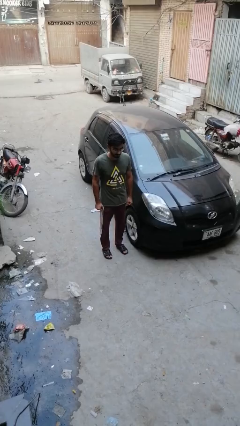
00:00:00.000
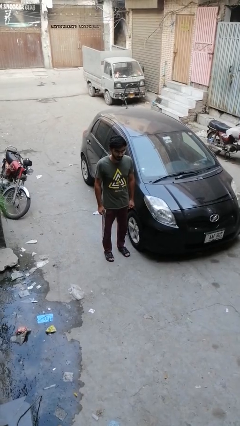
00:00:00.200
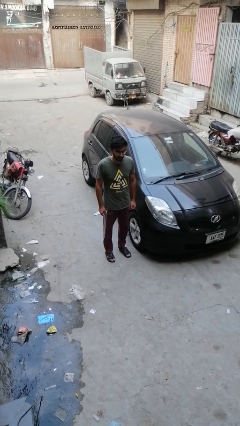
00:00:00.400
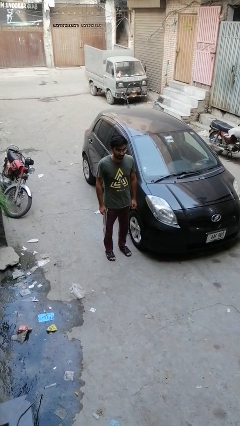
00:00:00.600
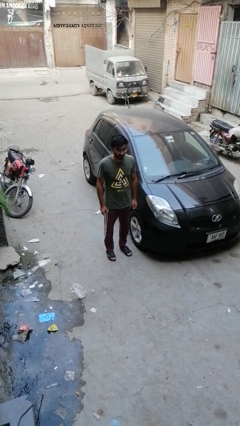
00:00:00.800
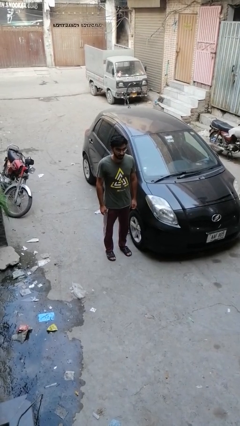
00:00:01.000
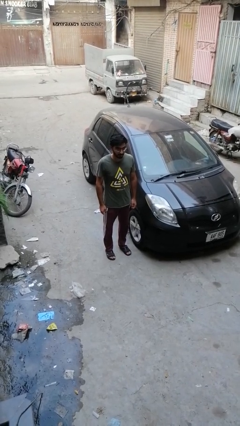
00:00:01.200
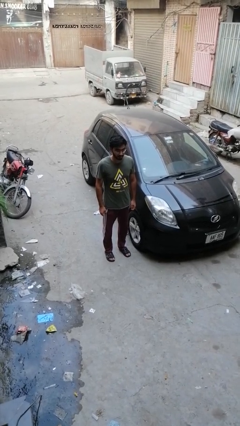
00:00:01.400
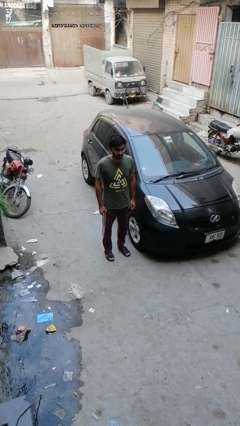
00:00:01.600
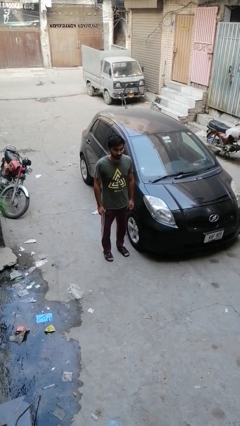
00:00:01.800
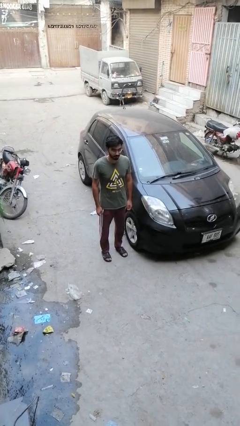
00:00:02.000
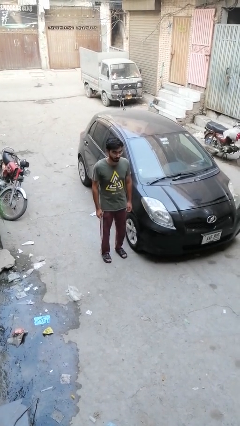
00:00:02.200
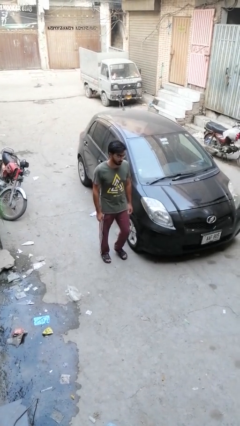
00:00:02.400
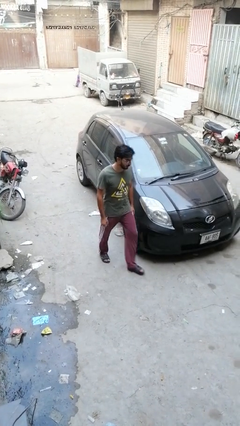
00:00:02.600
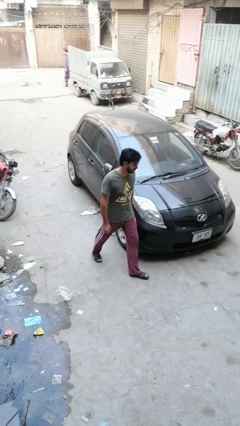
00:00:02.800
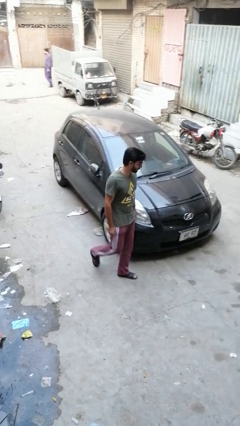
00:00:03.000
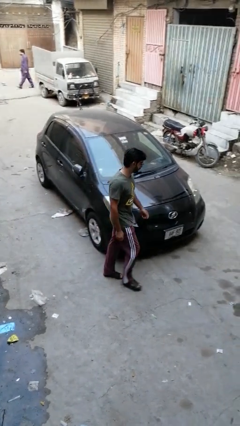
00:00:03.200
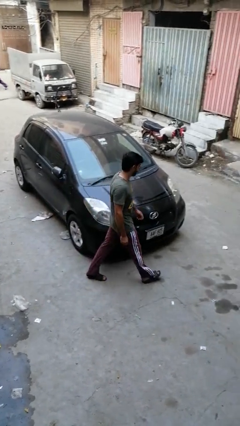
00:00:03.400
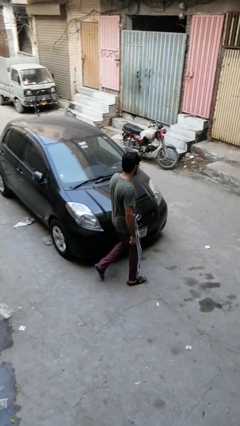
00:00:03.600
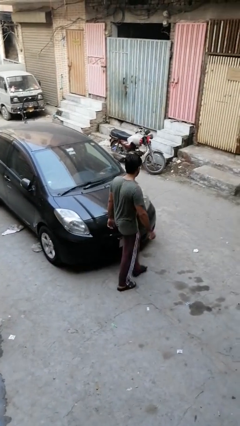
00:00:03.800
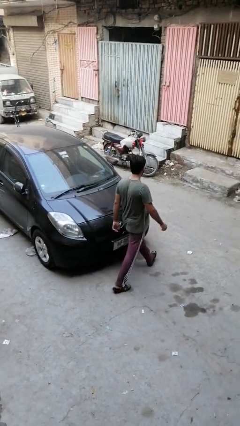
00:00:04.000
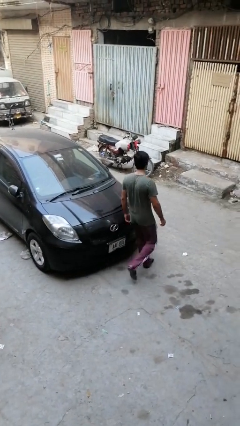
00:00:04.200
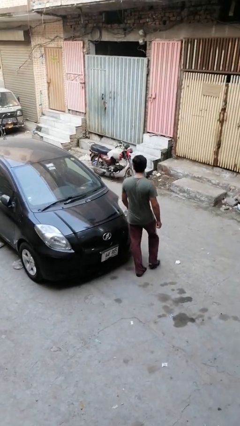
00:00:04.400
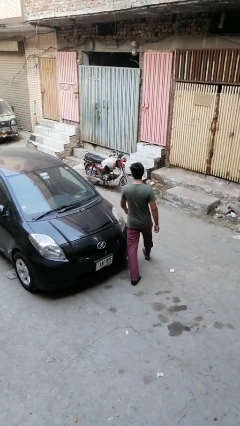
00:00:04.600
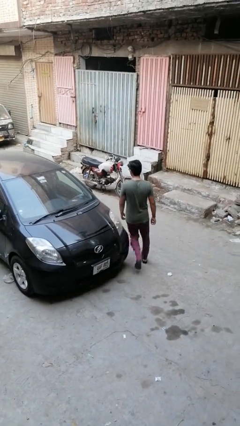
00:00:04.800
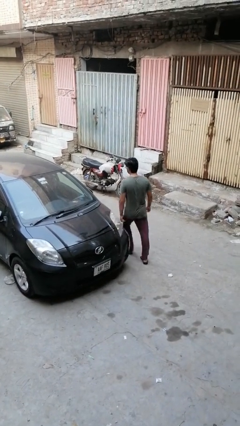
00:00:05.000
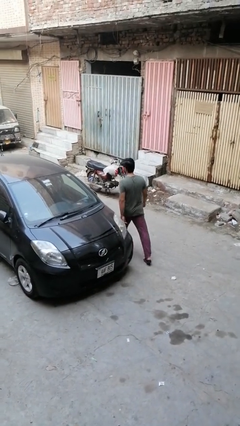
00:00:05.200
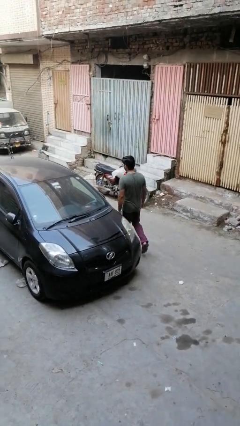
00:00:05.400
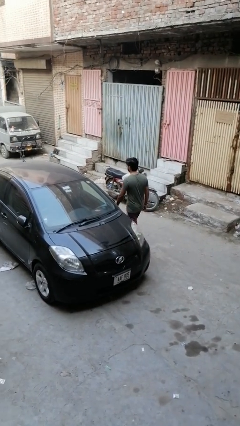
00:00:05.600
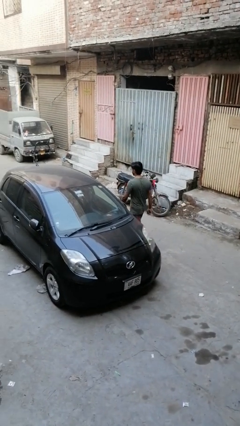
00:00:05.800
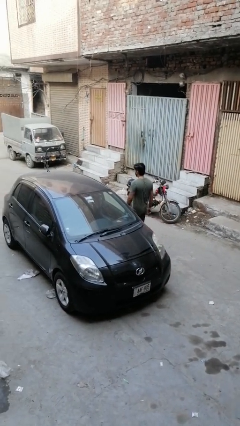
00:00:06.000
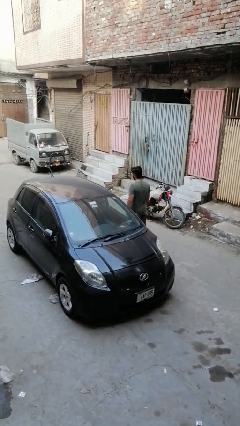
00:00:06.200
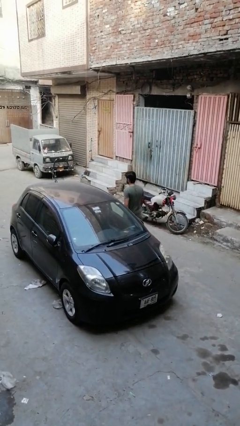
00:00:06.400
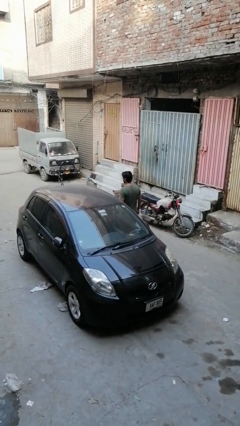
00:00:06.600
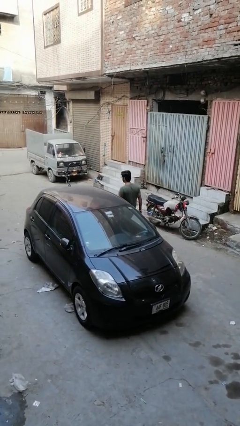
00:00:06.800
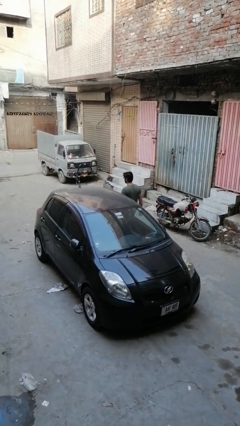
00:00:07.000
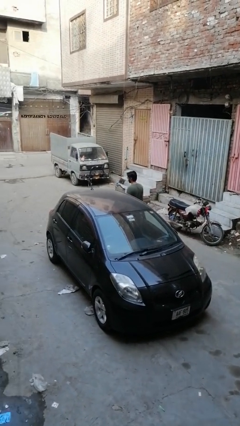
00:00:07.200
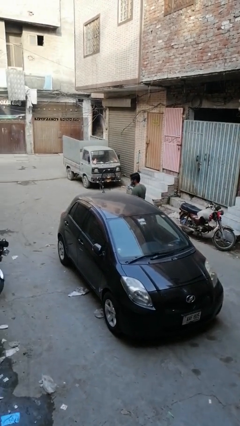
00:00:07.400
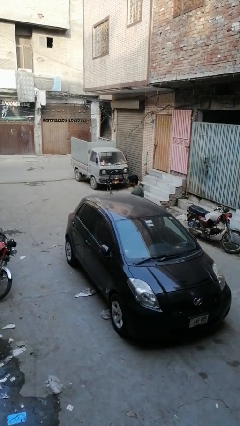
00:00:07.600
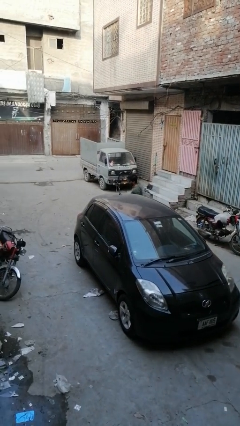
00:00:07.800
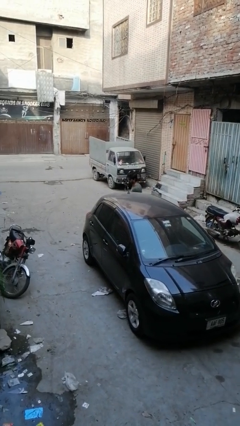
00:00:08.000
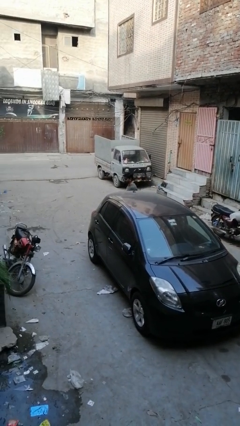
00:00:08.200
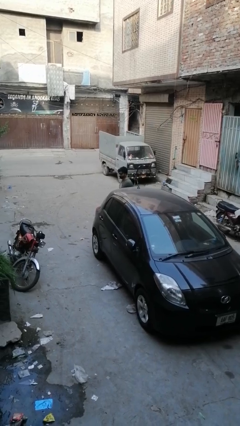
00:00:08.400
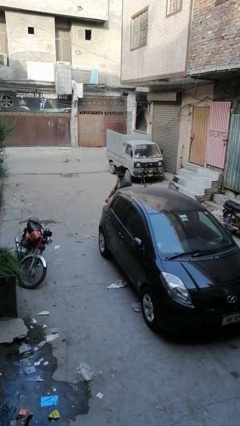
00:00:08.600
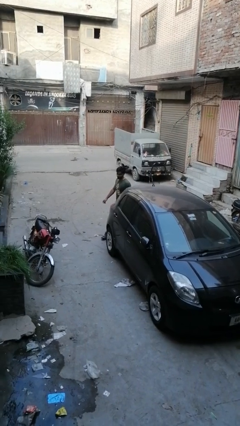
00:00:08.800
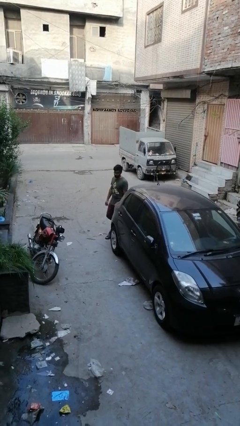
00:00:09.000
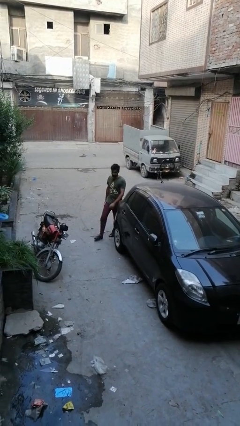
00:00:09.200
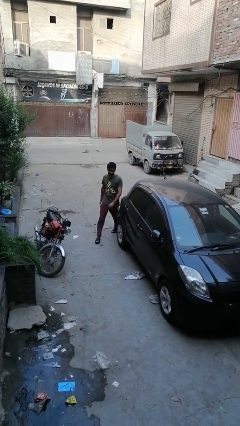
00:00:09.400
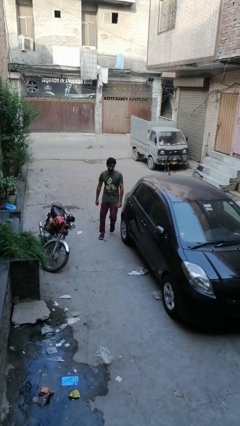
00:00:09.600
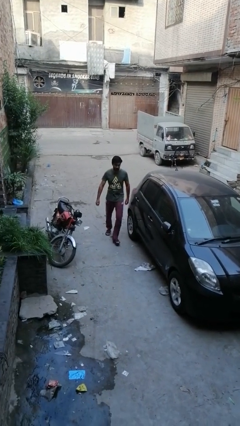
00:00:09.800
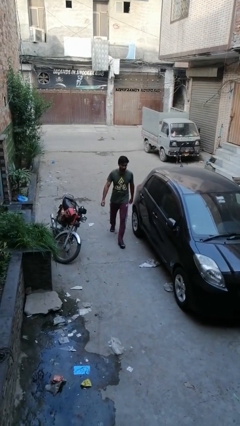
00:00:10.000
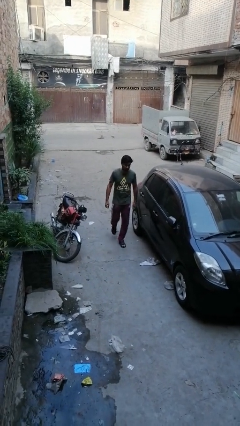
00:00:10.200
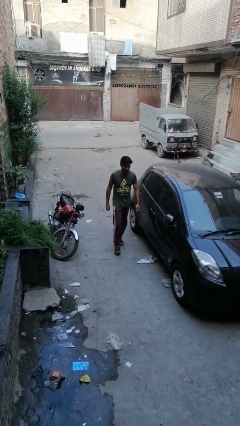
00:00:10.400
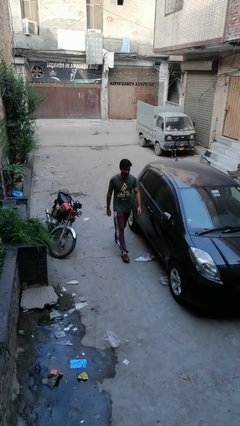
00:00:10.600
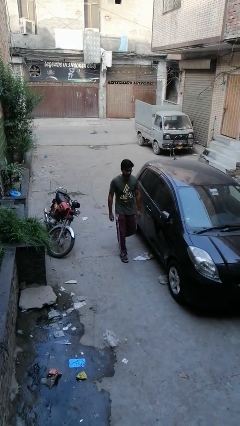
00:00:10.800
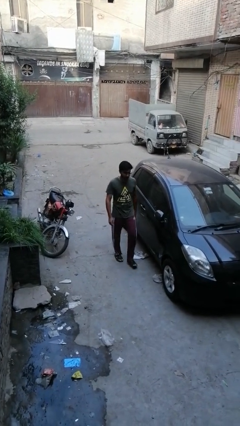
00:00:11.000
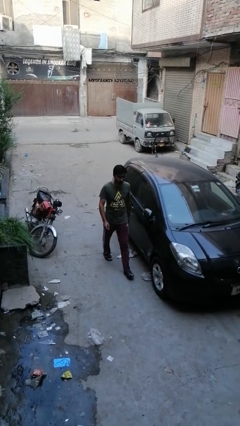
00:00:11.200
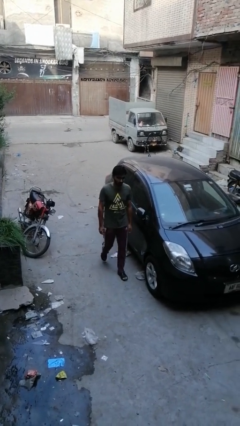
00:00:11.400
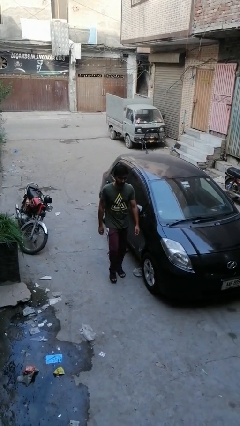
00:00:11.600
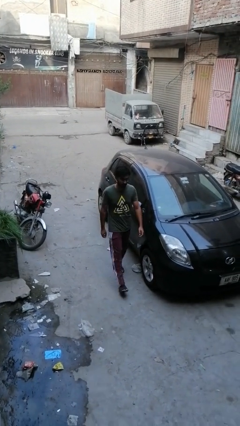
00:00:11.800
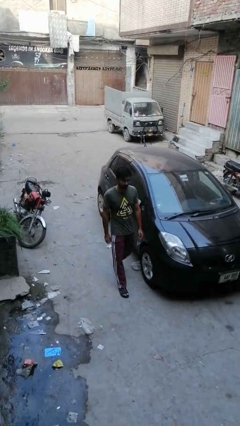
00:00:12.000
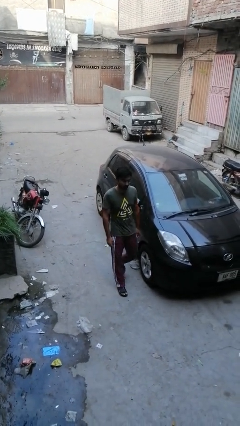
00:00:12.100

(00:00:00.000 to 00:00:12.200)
person walks around car

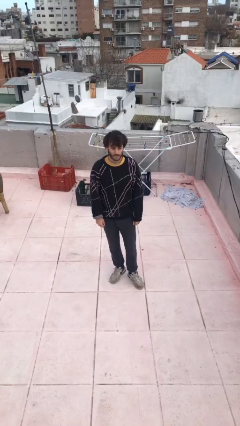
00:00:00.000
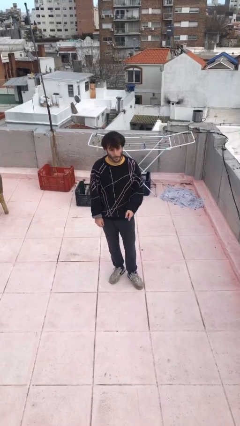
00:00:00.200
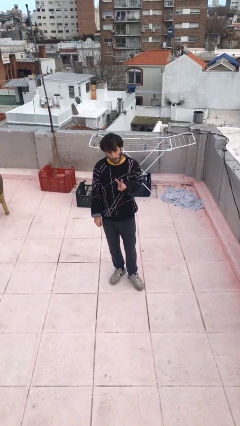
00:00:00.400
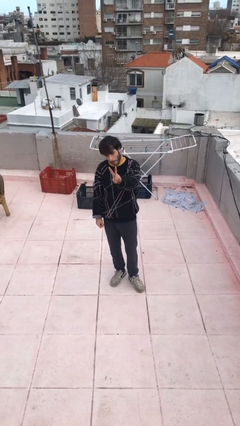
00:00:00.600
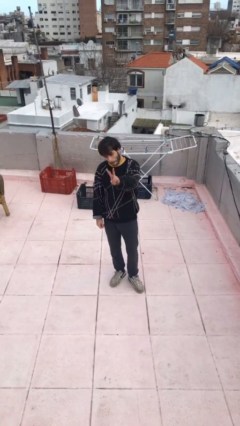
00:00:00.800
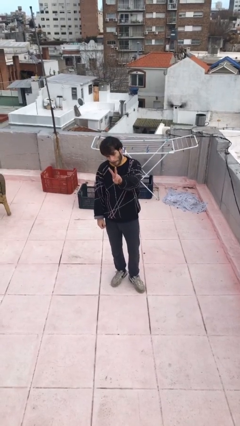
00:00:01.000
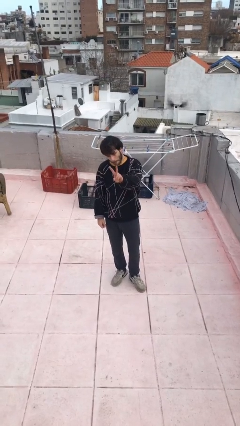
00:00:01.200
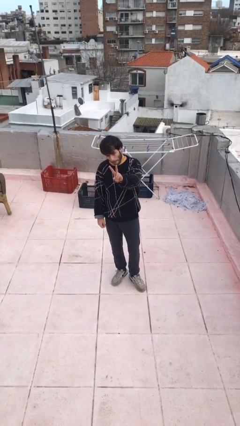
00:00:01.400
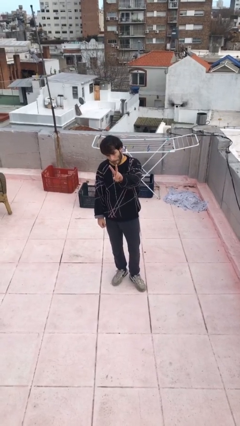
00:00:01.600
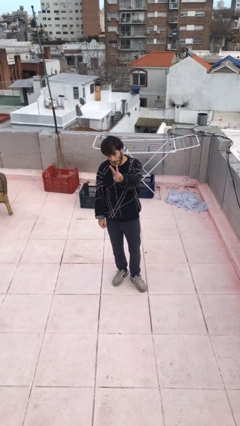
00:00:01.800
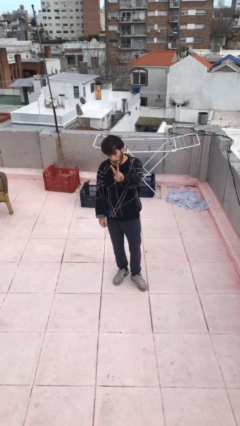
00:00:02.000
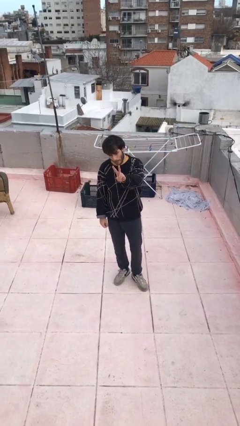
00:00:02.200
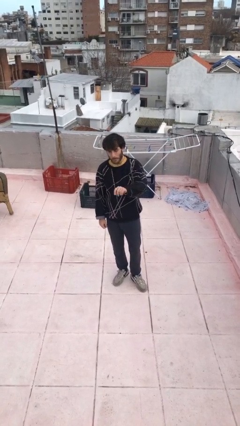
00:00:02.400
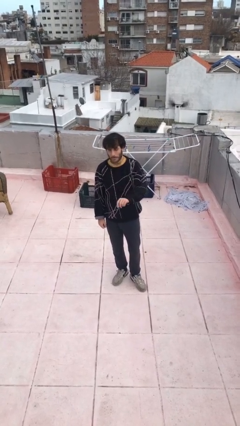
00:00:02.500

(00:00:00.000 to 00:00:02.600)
person gestures peace

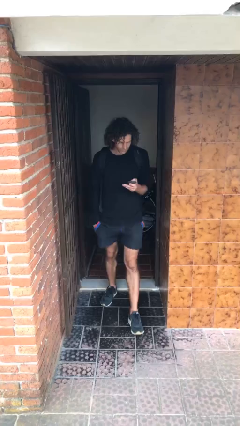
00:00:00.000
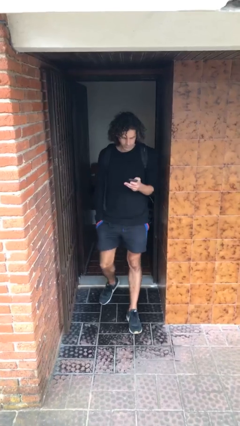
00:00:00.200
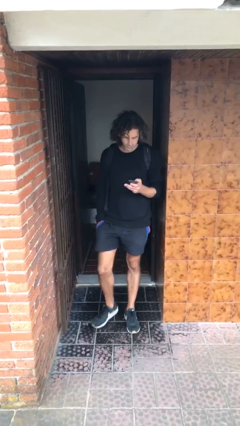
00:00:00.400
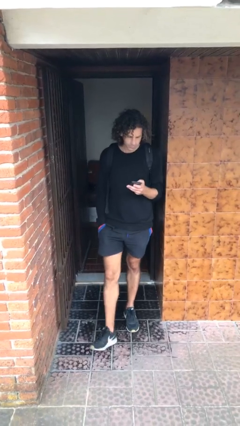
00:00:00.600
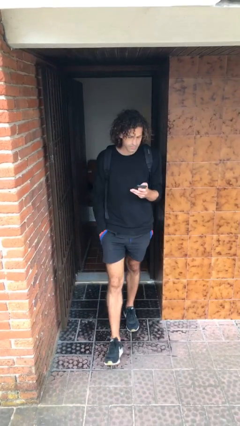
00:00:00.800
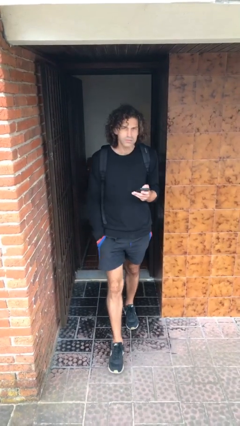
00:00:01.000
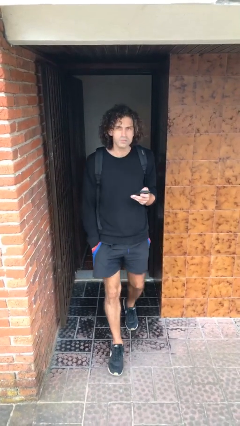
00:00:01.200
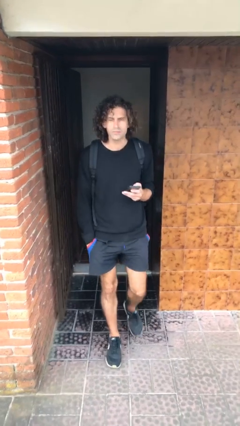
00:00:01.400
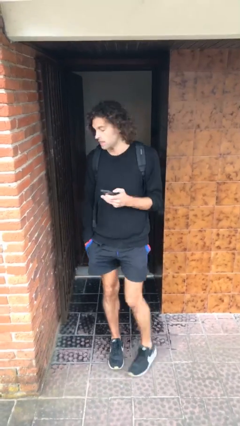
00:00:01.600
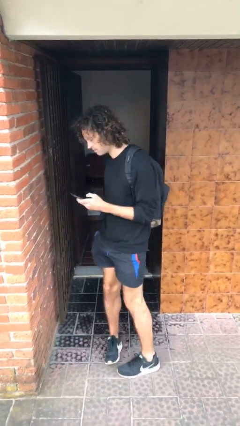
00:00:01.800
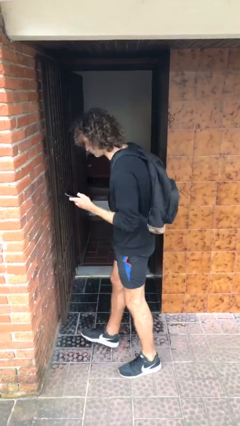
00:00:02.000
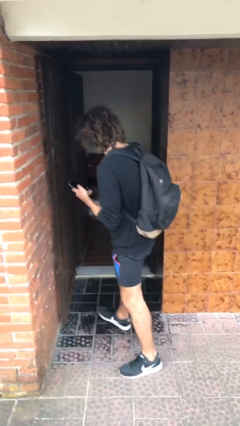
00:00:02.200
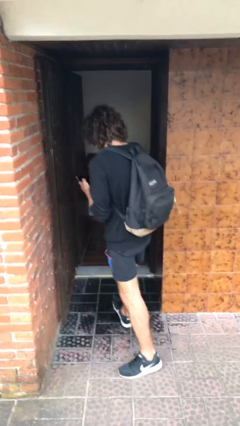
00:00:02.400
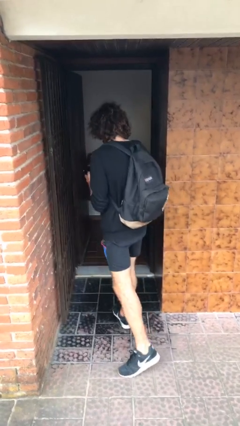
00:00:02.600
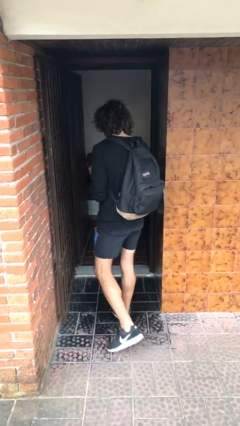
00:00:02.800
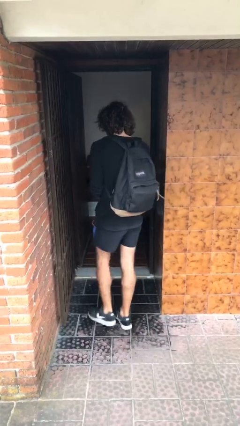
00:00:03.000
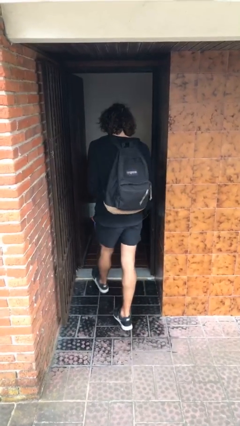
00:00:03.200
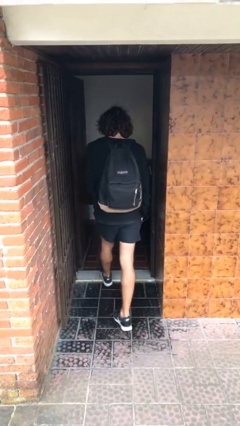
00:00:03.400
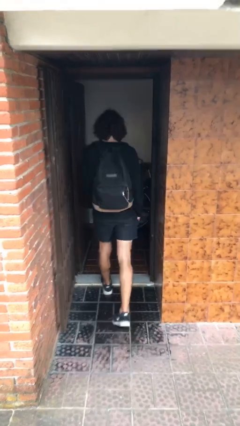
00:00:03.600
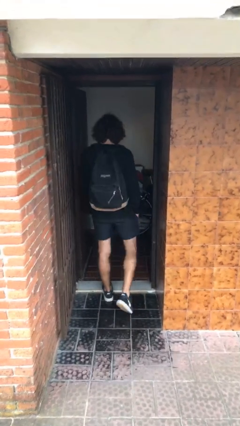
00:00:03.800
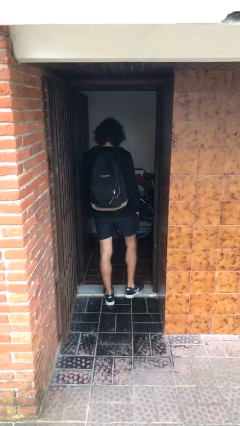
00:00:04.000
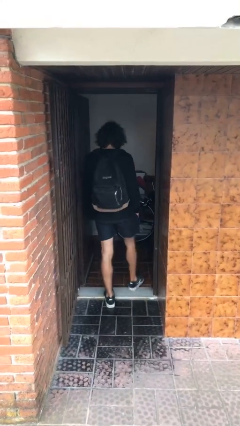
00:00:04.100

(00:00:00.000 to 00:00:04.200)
person exits scene through structure
